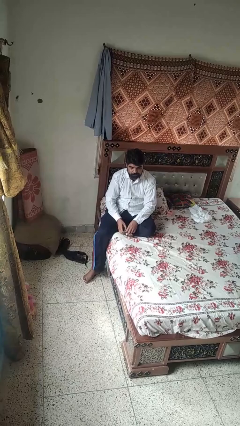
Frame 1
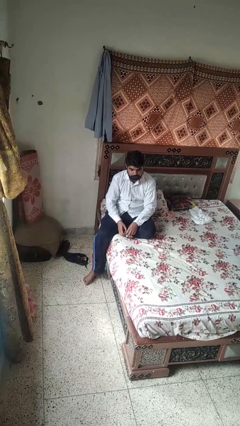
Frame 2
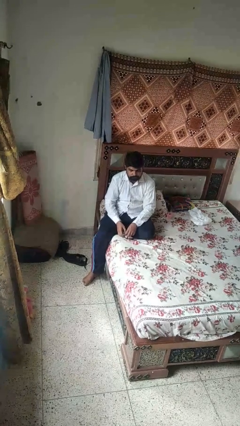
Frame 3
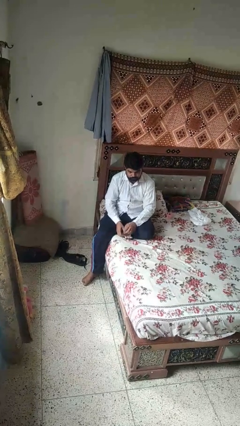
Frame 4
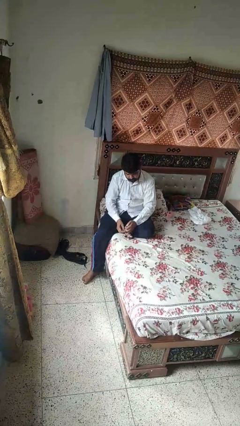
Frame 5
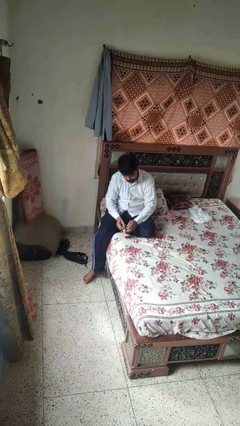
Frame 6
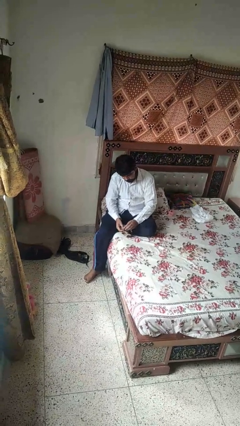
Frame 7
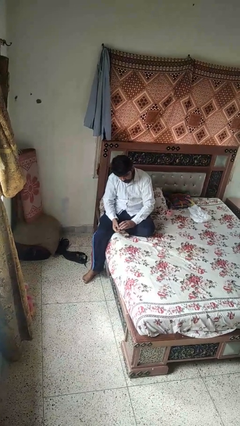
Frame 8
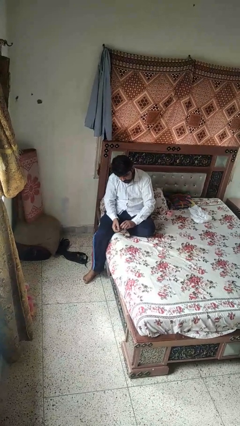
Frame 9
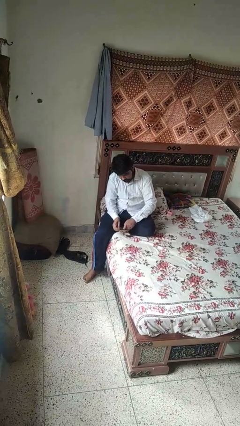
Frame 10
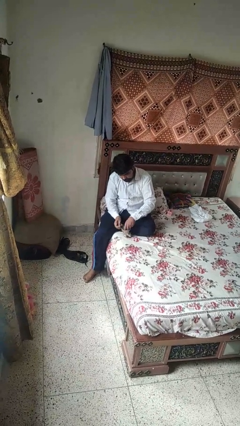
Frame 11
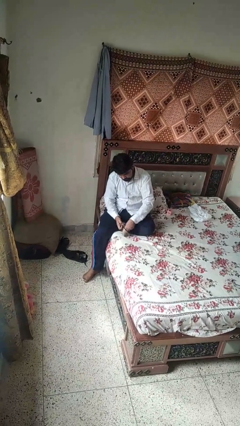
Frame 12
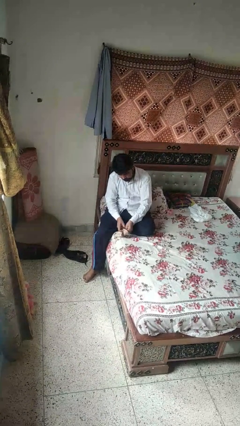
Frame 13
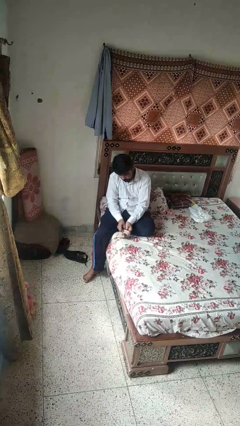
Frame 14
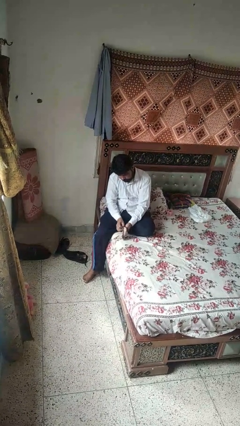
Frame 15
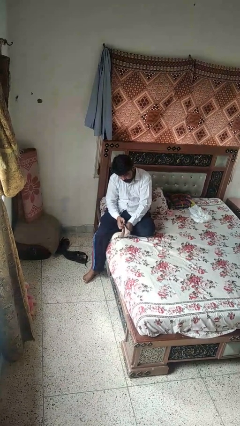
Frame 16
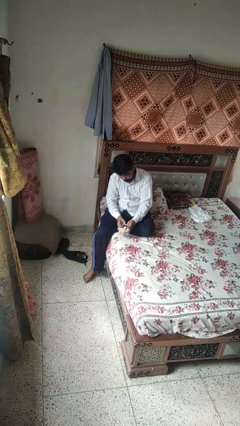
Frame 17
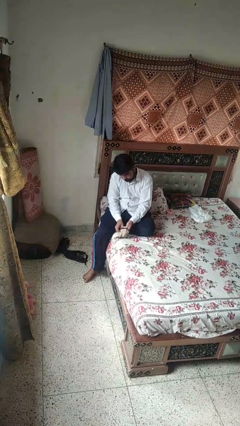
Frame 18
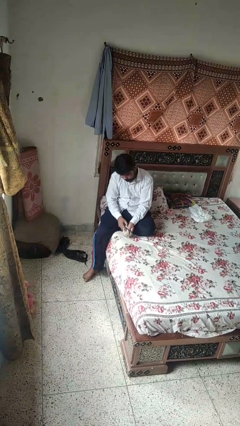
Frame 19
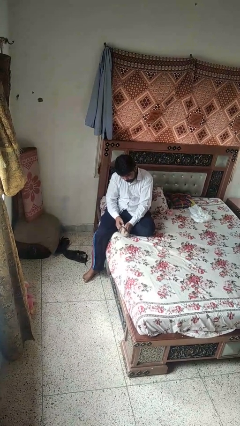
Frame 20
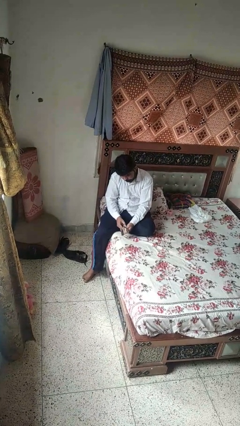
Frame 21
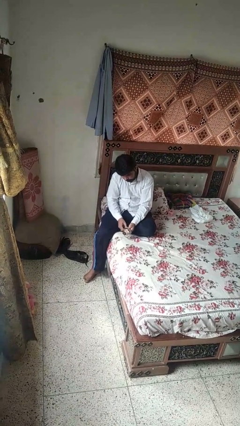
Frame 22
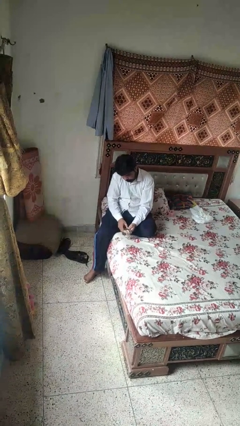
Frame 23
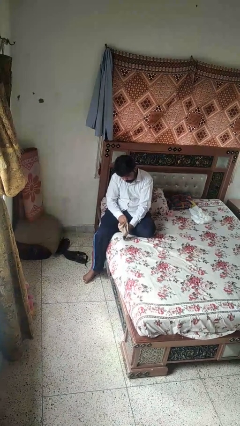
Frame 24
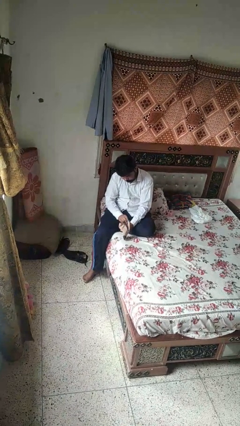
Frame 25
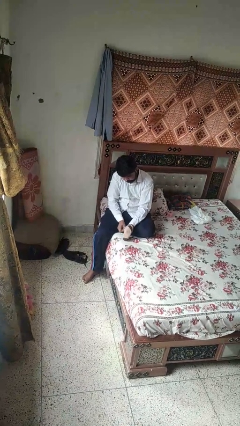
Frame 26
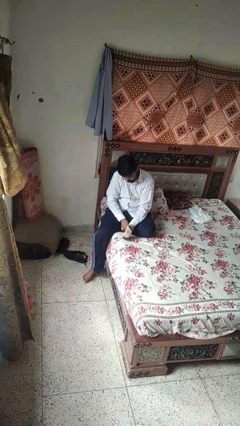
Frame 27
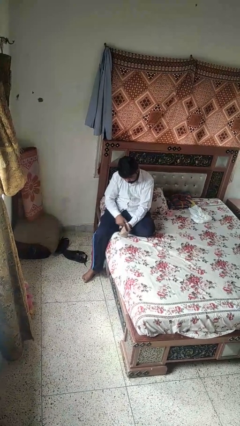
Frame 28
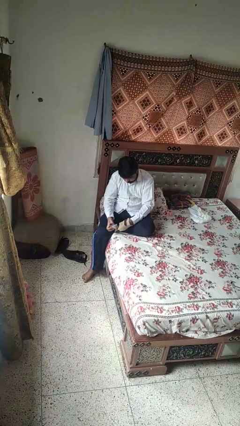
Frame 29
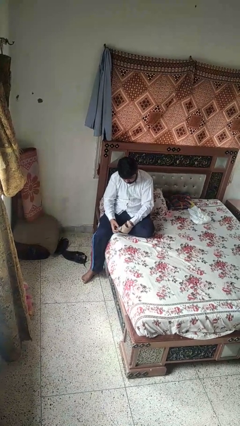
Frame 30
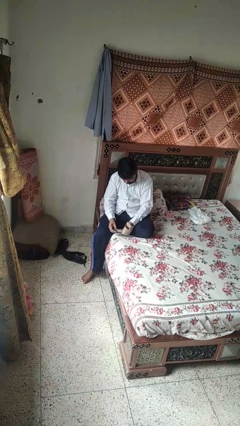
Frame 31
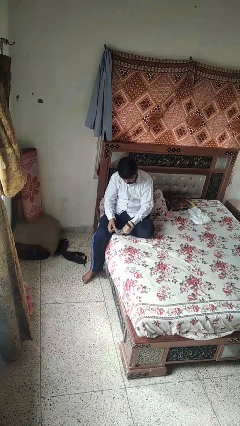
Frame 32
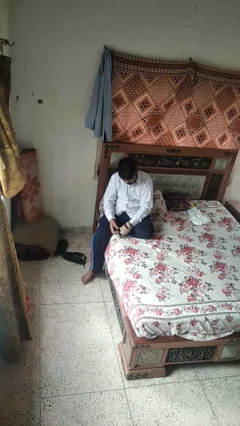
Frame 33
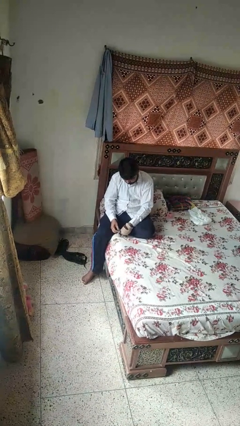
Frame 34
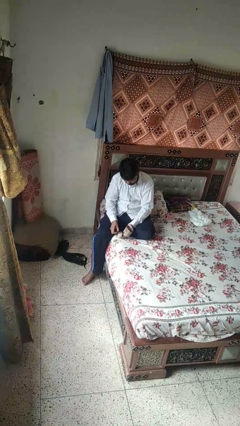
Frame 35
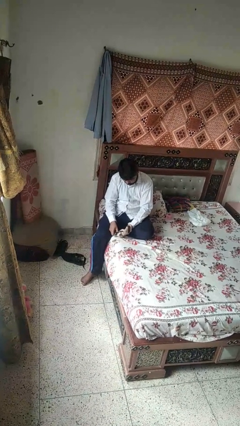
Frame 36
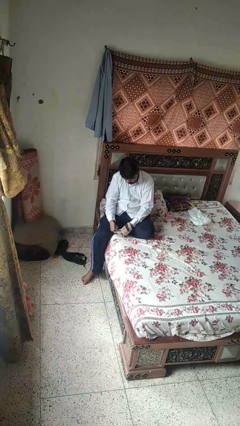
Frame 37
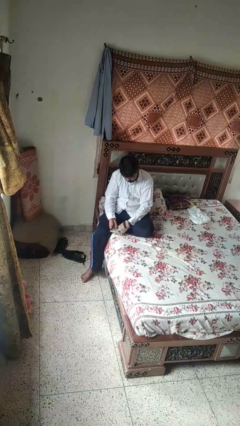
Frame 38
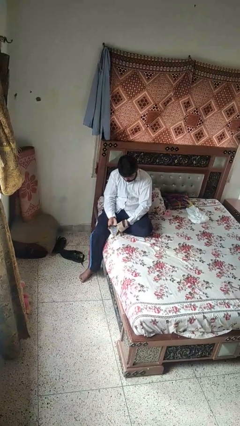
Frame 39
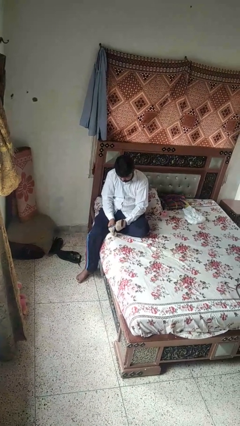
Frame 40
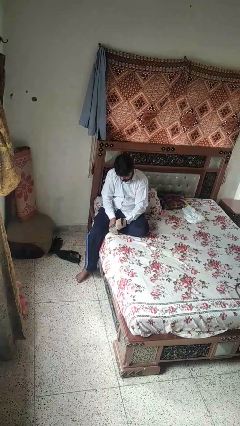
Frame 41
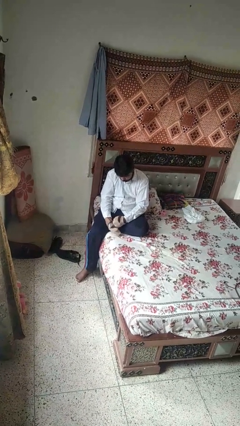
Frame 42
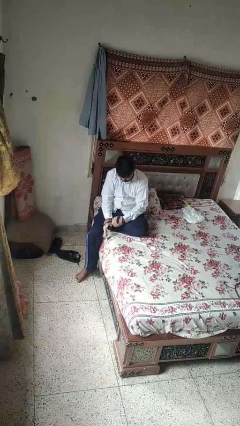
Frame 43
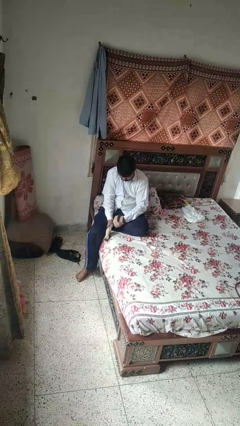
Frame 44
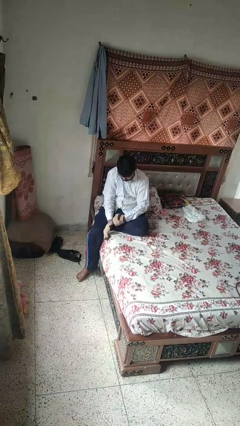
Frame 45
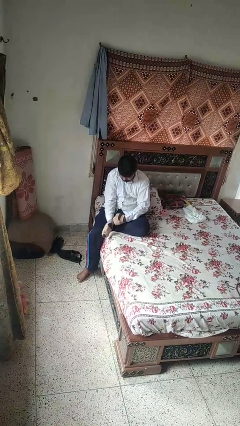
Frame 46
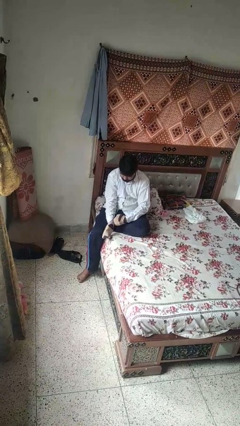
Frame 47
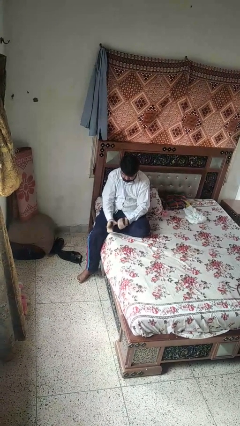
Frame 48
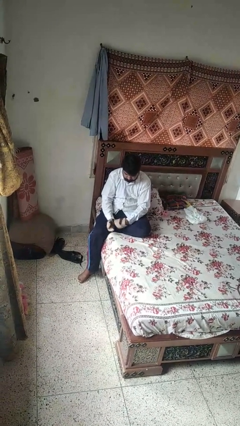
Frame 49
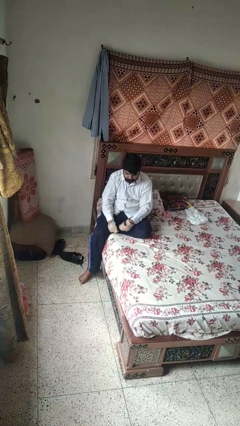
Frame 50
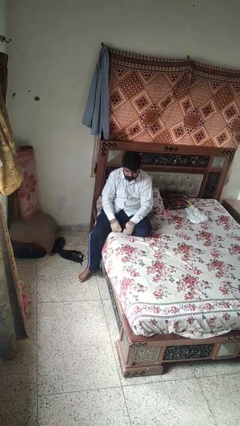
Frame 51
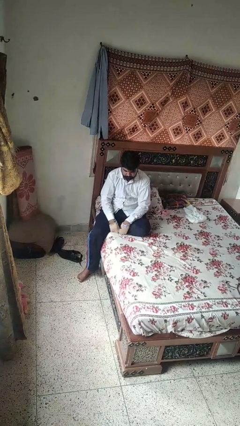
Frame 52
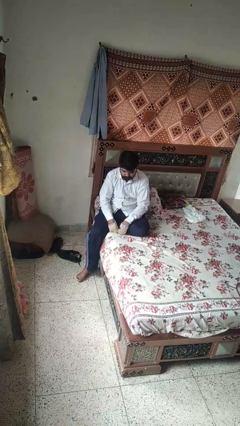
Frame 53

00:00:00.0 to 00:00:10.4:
person puts on gloves

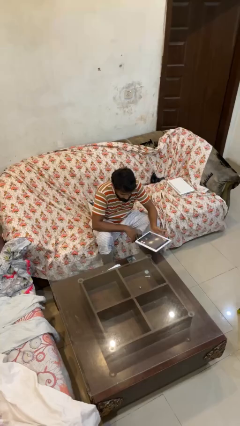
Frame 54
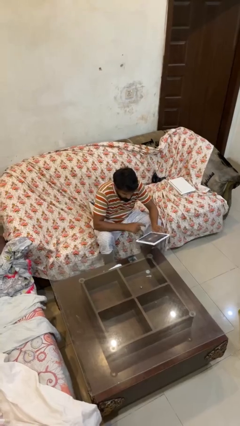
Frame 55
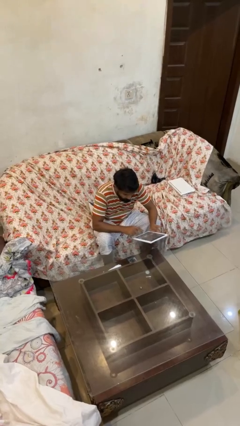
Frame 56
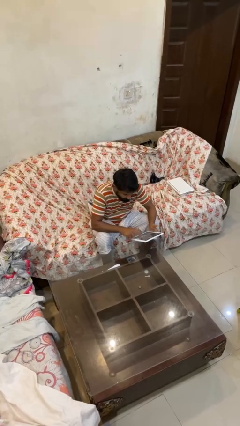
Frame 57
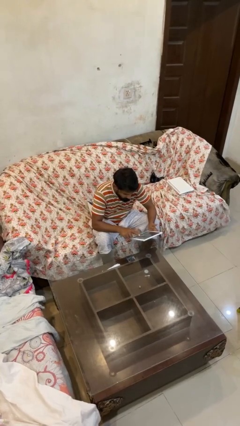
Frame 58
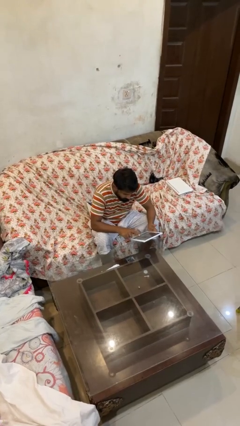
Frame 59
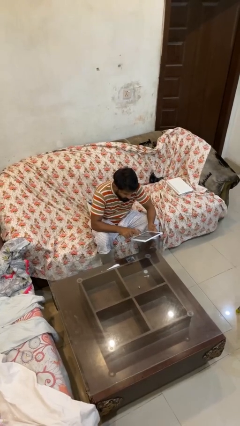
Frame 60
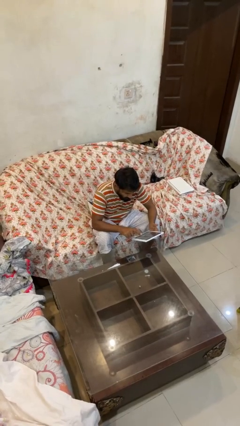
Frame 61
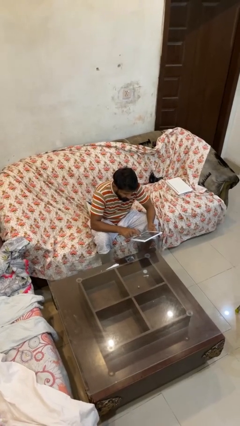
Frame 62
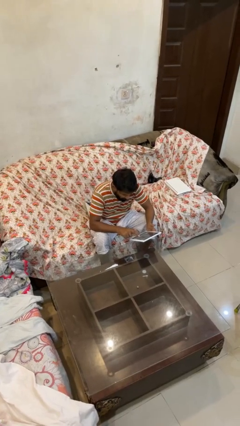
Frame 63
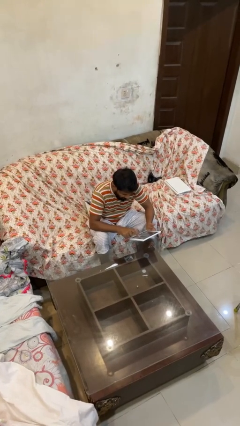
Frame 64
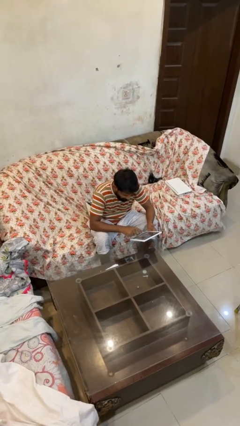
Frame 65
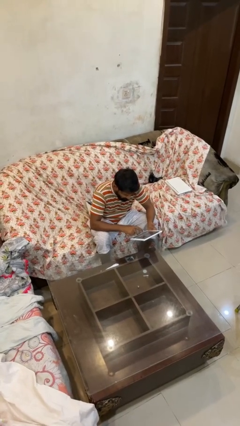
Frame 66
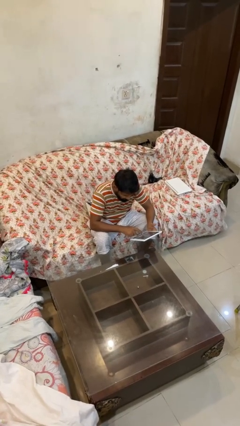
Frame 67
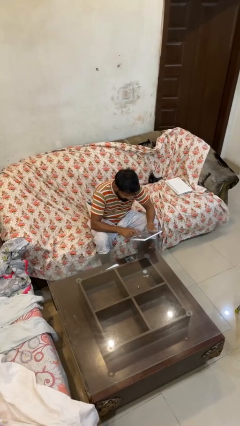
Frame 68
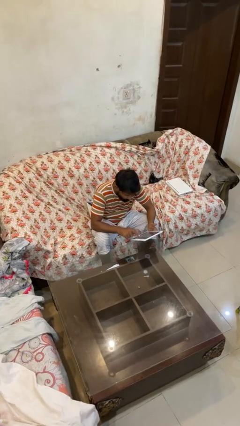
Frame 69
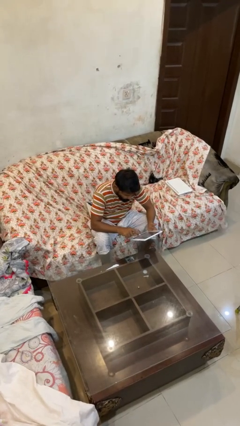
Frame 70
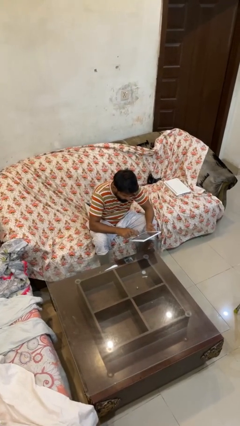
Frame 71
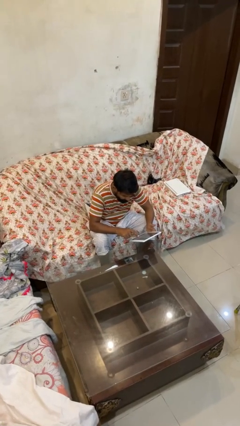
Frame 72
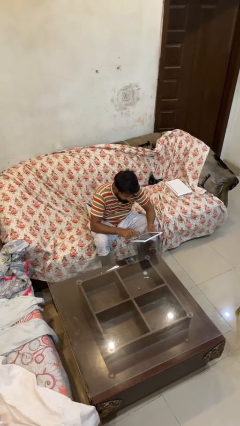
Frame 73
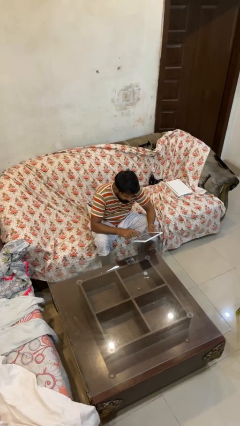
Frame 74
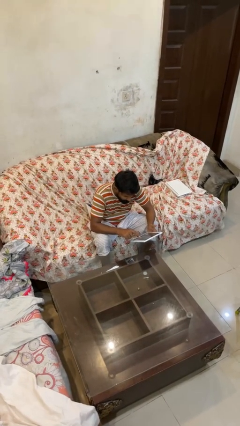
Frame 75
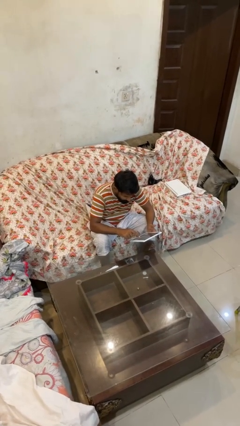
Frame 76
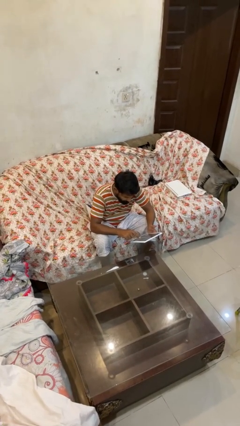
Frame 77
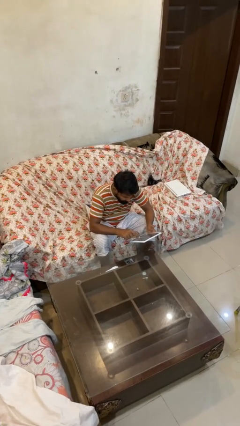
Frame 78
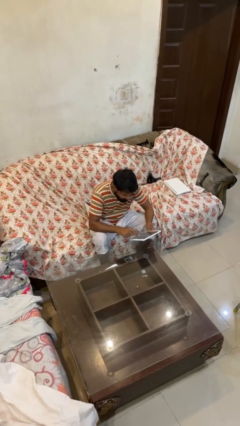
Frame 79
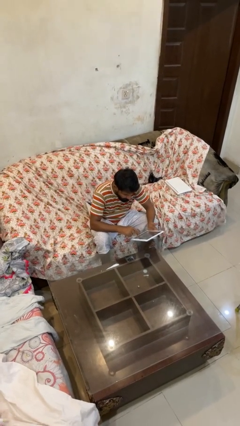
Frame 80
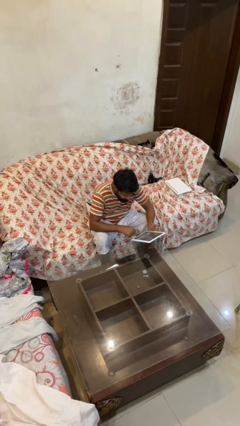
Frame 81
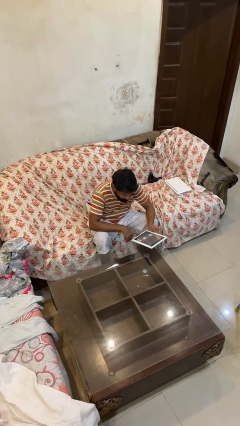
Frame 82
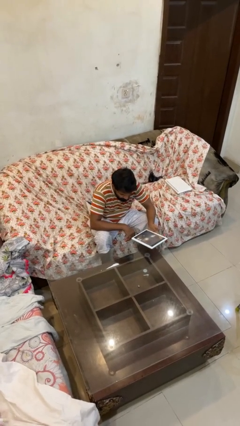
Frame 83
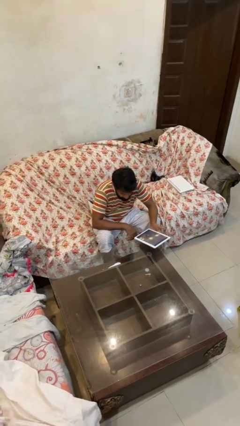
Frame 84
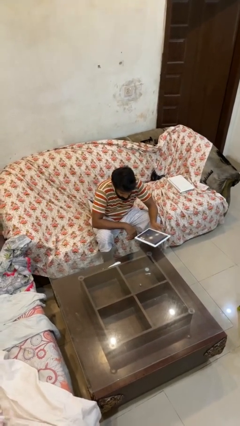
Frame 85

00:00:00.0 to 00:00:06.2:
person interacts with tablet

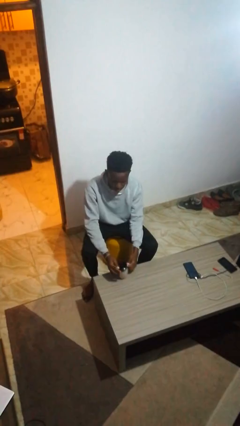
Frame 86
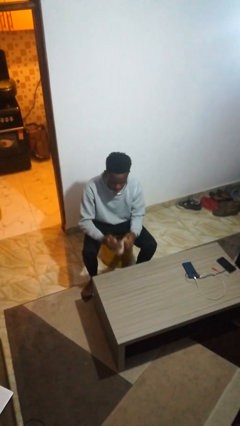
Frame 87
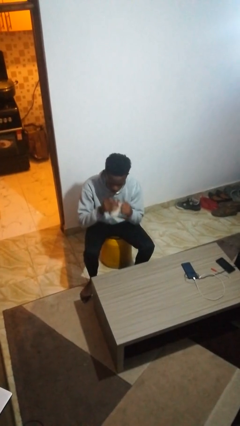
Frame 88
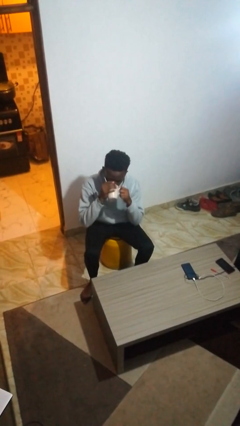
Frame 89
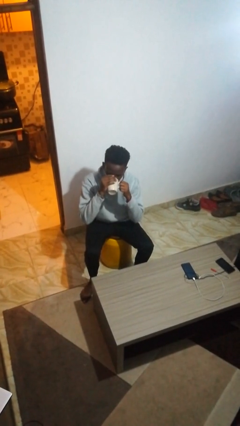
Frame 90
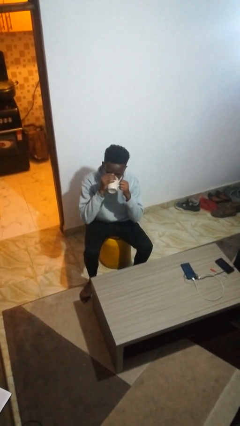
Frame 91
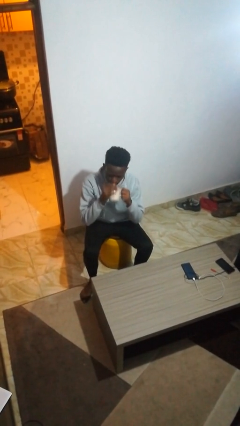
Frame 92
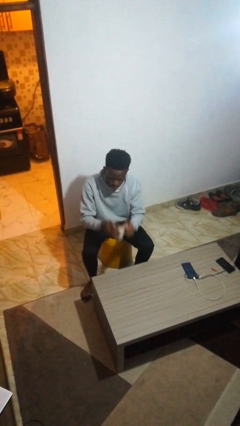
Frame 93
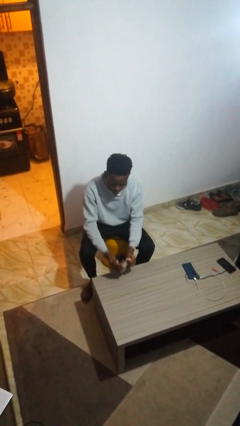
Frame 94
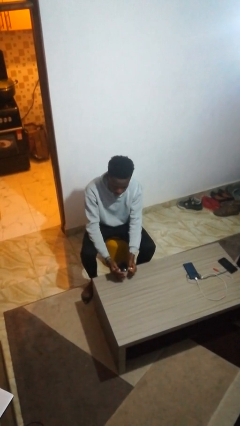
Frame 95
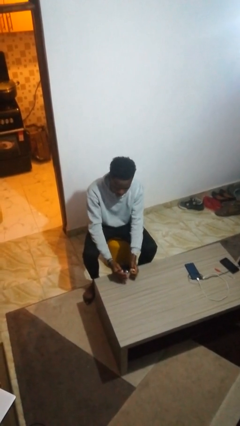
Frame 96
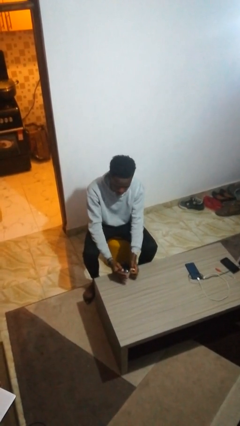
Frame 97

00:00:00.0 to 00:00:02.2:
person drinks from mug
